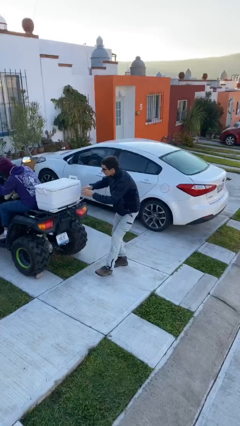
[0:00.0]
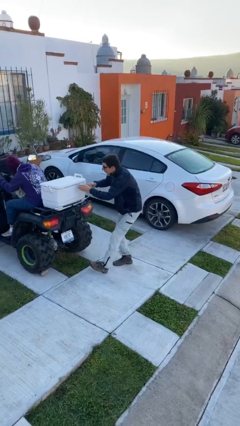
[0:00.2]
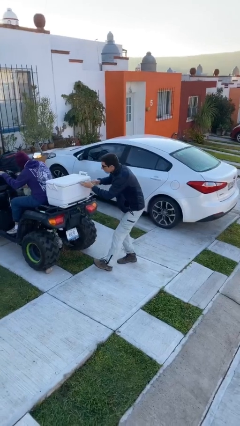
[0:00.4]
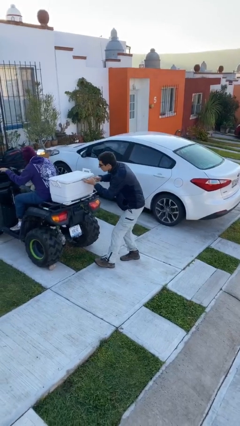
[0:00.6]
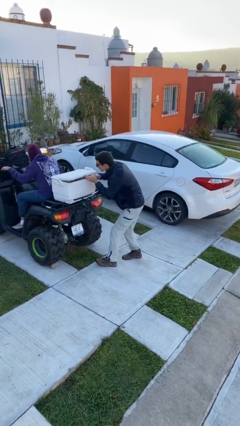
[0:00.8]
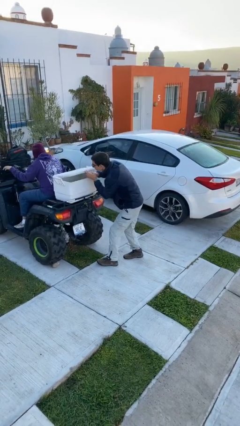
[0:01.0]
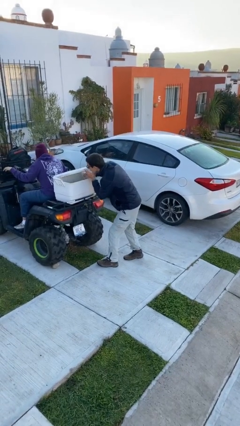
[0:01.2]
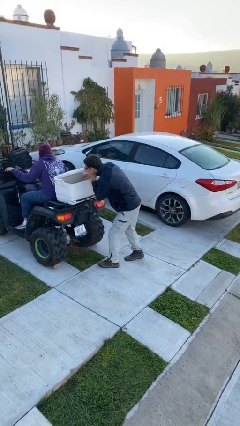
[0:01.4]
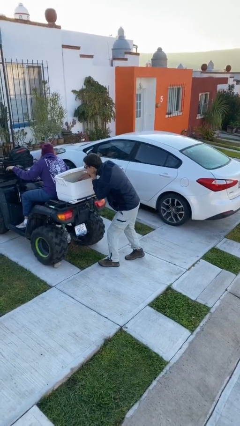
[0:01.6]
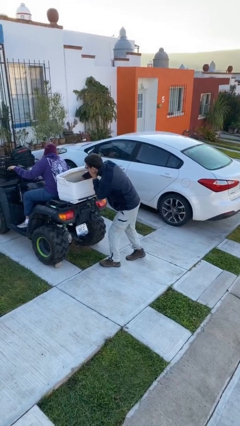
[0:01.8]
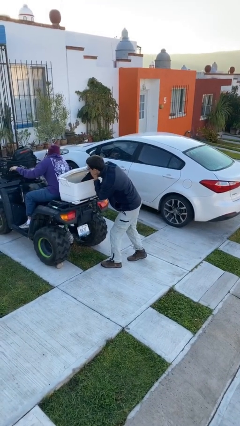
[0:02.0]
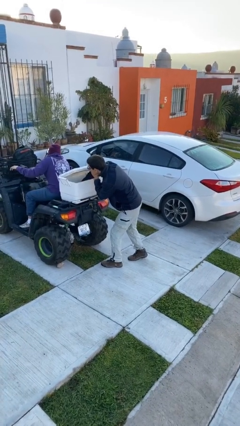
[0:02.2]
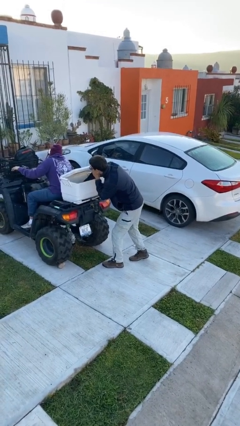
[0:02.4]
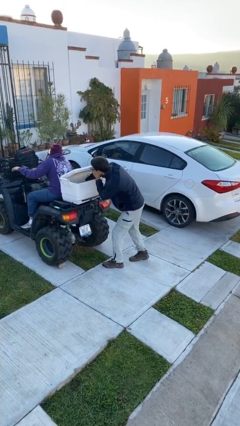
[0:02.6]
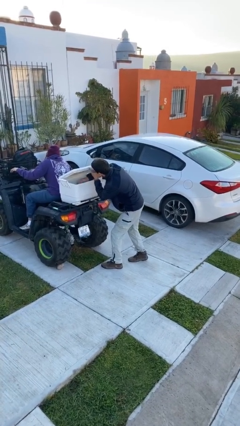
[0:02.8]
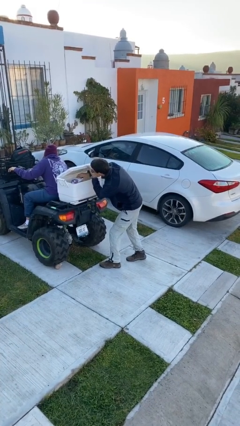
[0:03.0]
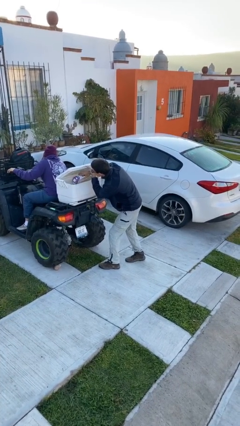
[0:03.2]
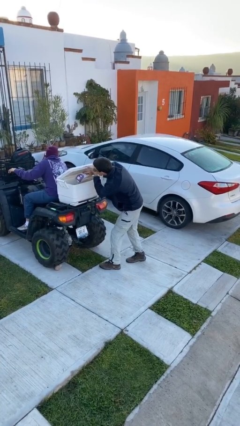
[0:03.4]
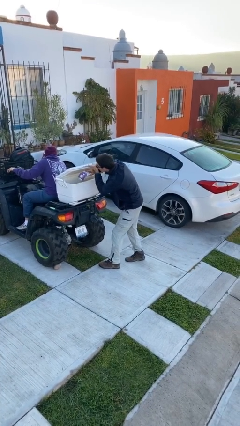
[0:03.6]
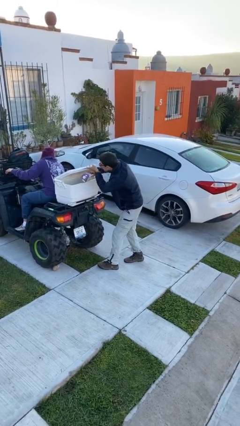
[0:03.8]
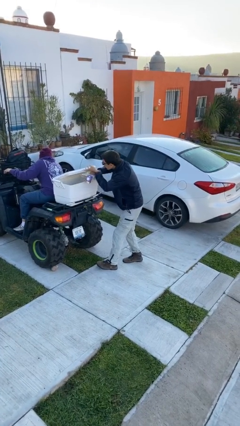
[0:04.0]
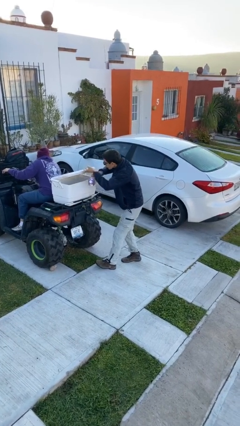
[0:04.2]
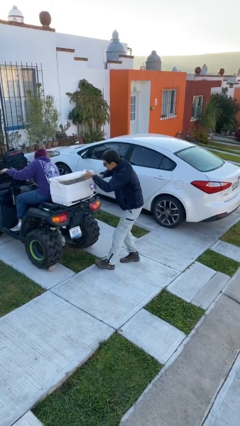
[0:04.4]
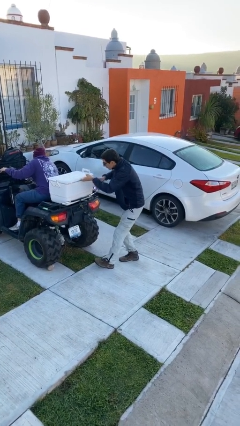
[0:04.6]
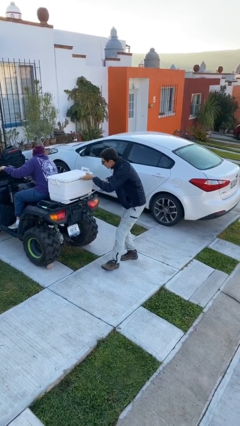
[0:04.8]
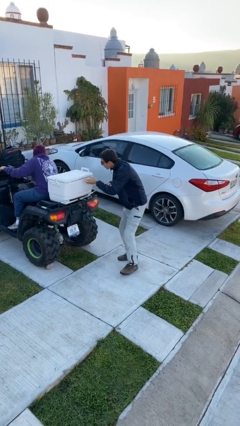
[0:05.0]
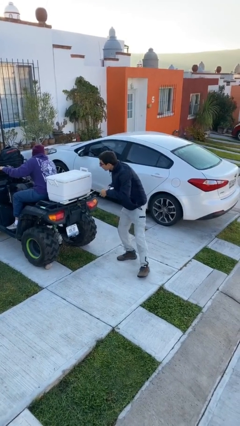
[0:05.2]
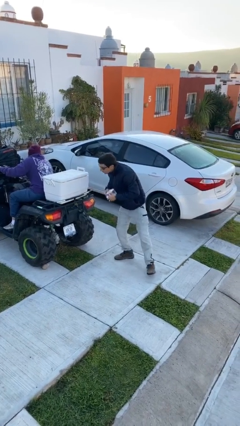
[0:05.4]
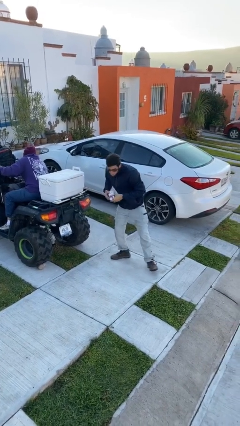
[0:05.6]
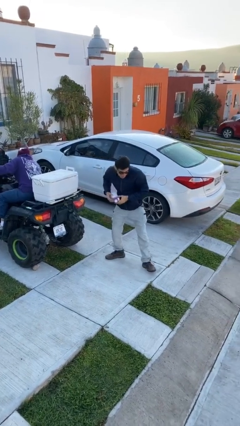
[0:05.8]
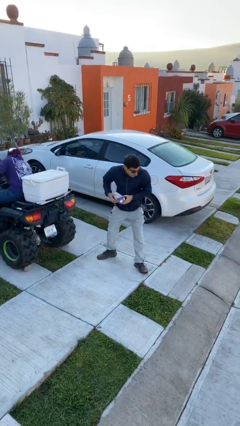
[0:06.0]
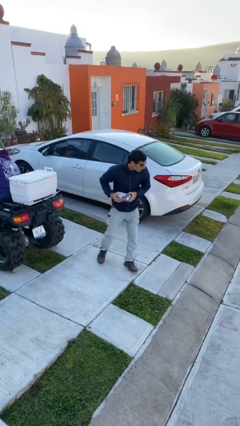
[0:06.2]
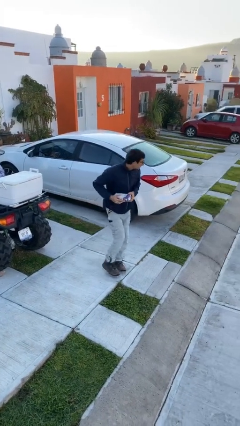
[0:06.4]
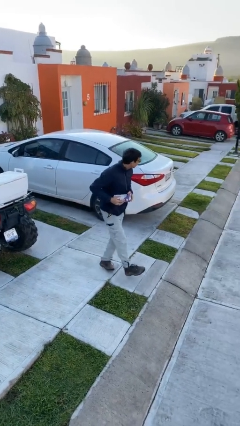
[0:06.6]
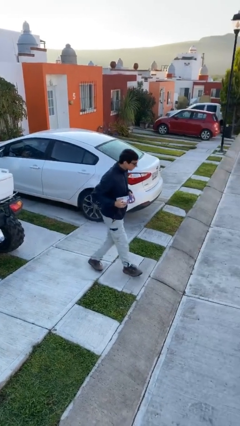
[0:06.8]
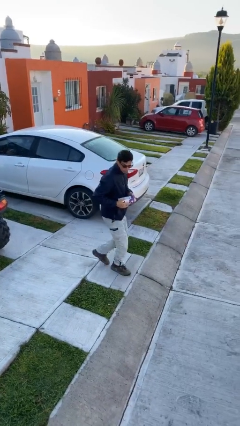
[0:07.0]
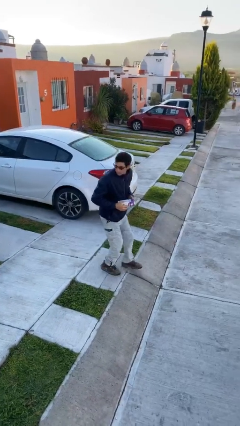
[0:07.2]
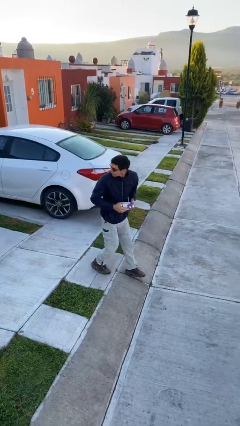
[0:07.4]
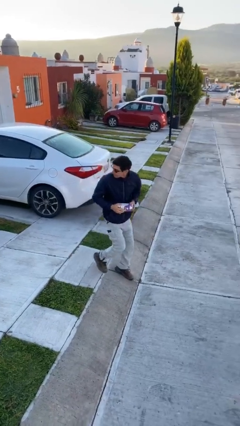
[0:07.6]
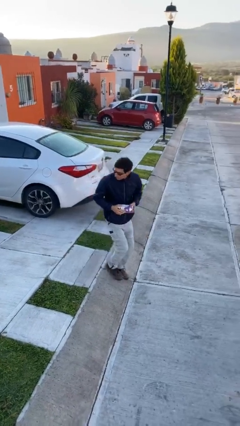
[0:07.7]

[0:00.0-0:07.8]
person steals object from person

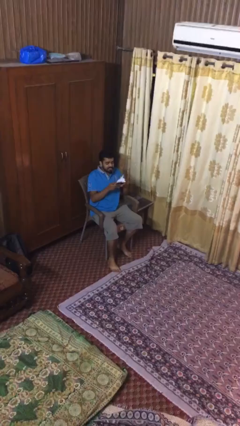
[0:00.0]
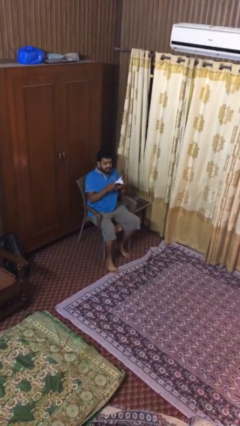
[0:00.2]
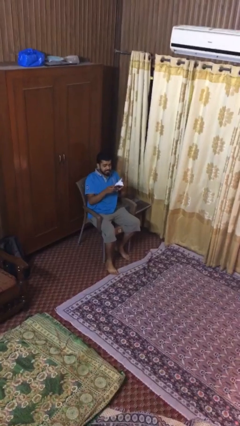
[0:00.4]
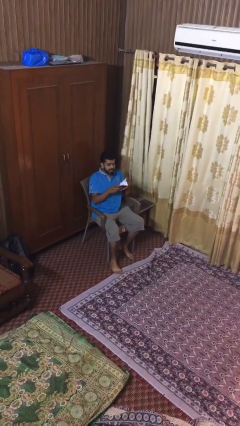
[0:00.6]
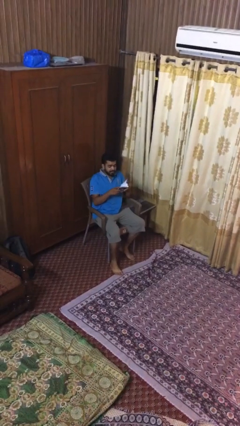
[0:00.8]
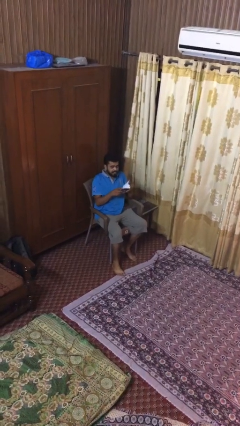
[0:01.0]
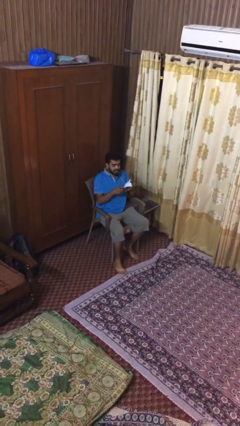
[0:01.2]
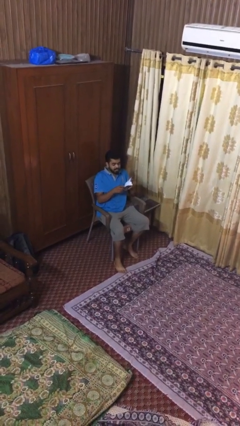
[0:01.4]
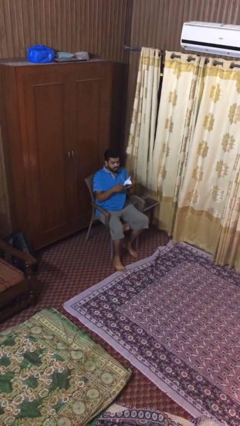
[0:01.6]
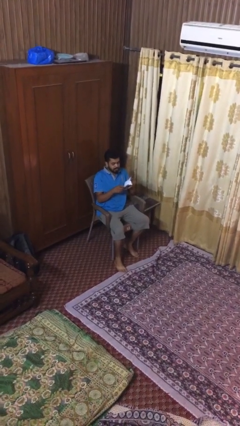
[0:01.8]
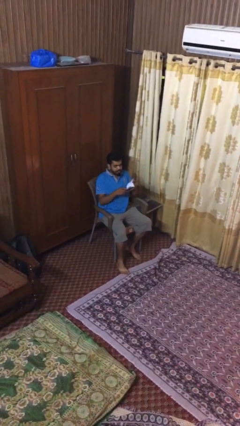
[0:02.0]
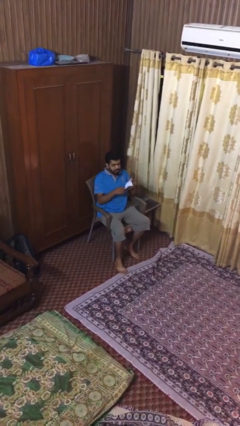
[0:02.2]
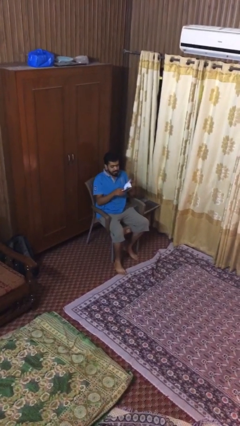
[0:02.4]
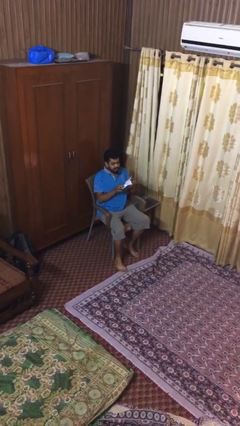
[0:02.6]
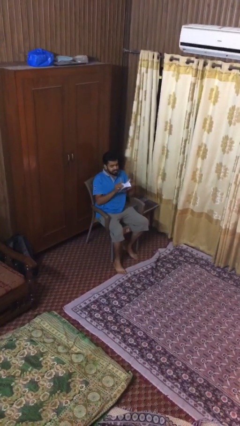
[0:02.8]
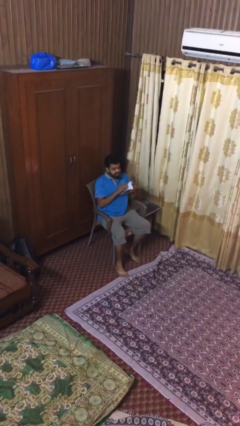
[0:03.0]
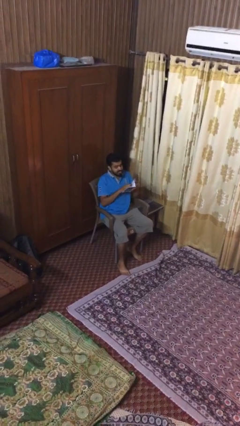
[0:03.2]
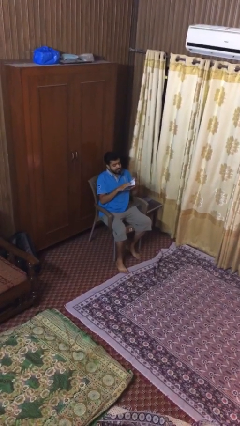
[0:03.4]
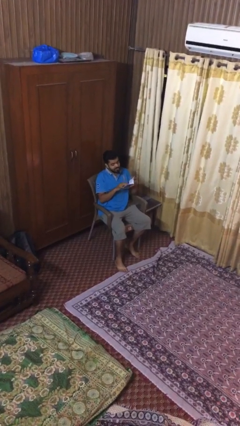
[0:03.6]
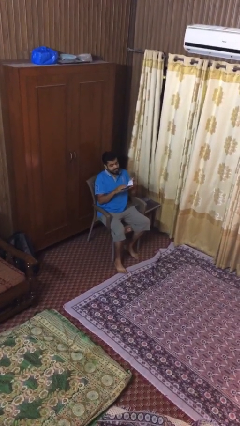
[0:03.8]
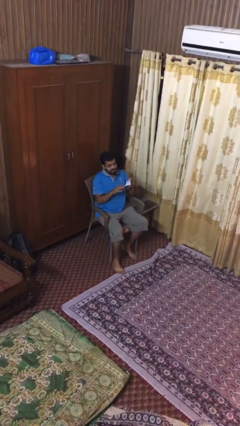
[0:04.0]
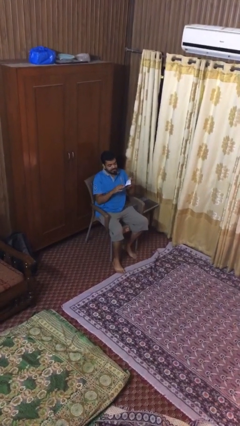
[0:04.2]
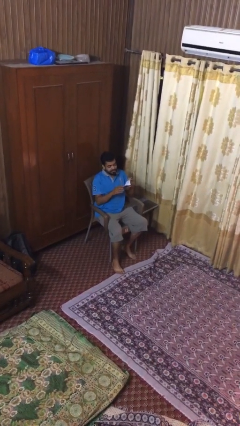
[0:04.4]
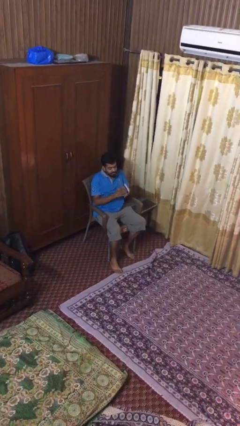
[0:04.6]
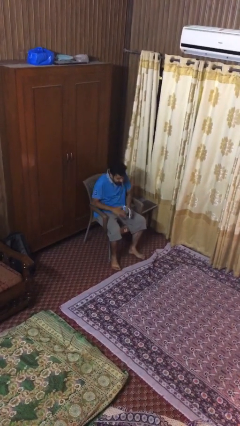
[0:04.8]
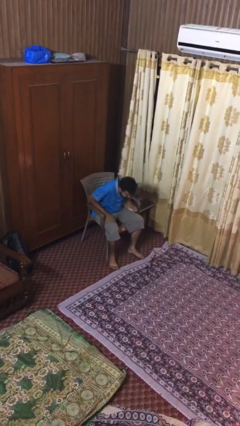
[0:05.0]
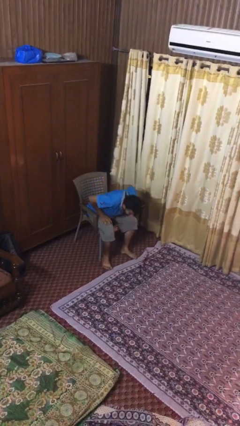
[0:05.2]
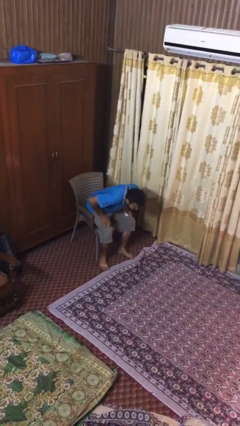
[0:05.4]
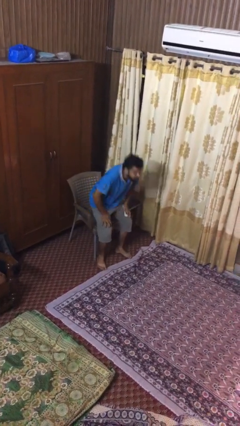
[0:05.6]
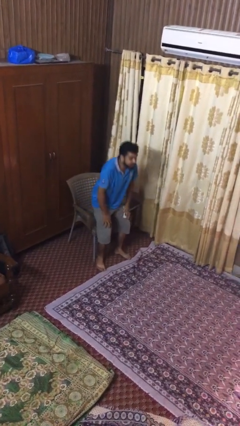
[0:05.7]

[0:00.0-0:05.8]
person reads document

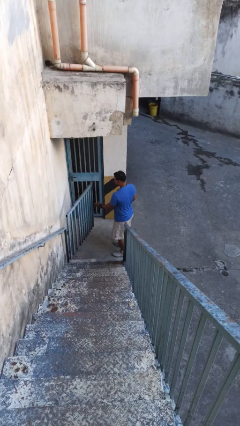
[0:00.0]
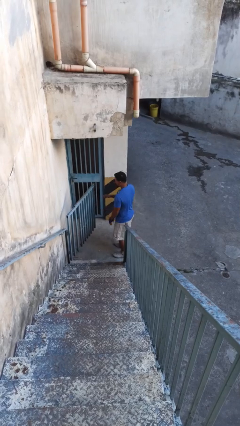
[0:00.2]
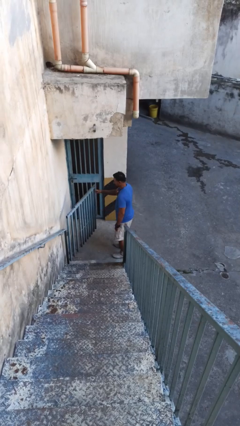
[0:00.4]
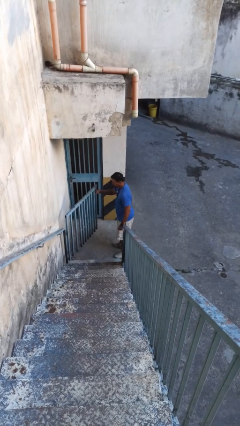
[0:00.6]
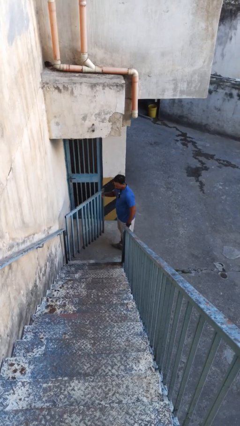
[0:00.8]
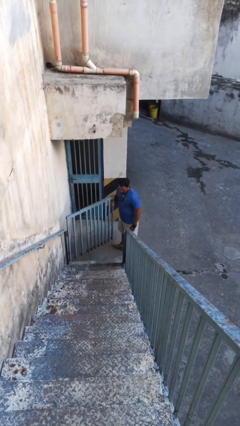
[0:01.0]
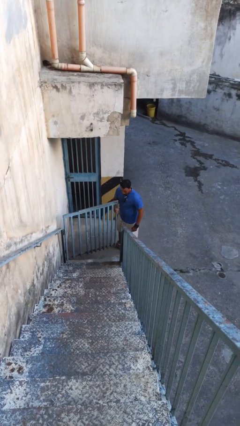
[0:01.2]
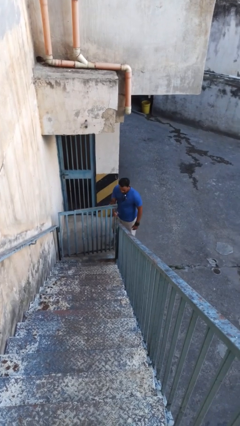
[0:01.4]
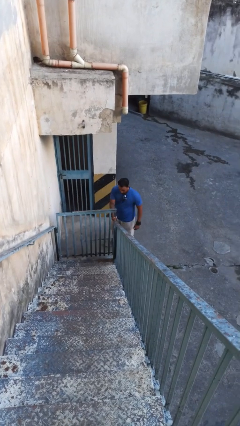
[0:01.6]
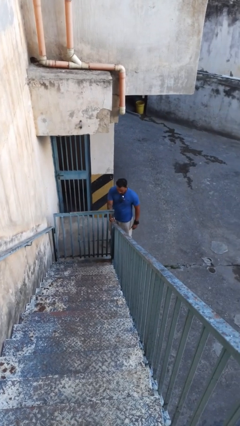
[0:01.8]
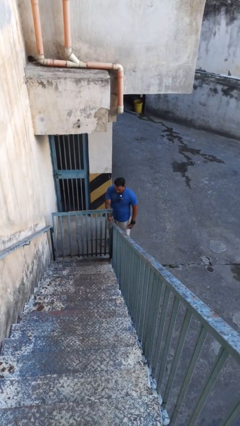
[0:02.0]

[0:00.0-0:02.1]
person closes facility door

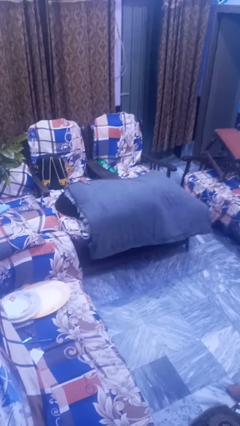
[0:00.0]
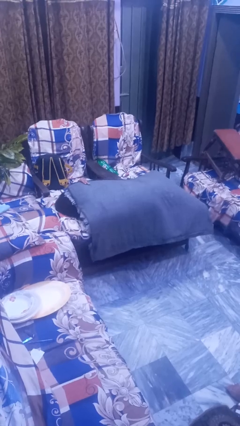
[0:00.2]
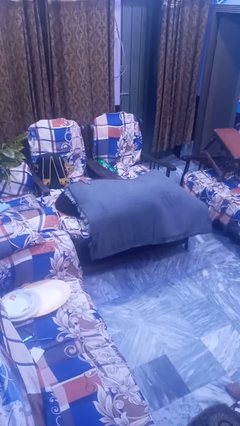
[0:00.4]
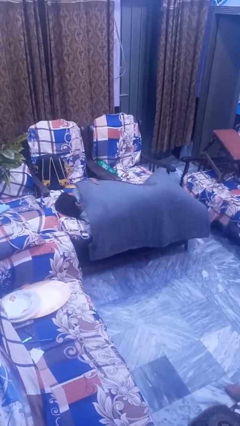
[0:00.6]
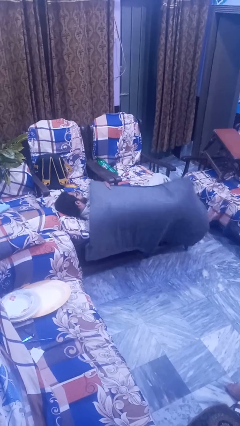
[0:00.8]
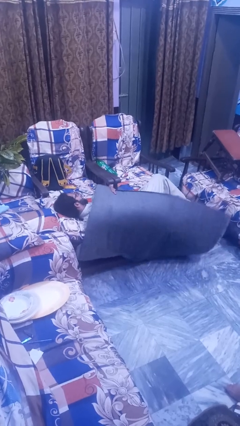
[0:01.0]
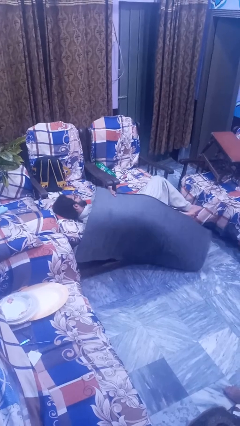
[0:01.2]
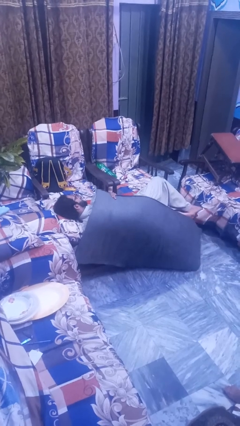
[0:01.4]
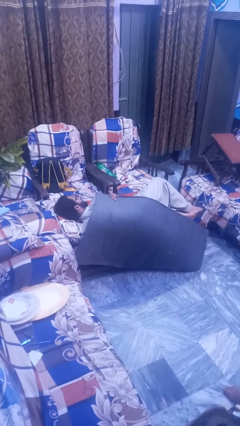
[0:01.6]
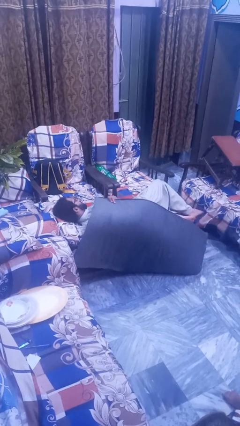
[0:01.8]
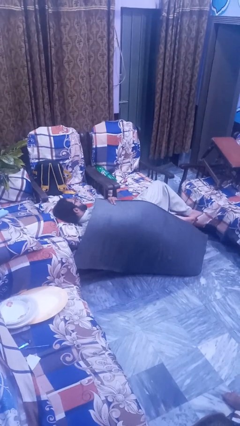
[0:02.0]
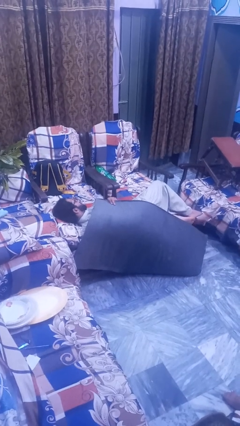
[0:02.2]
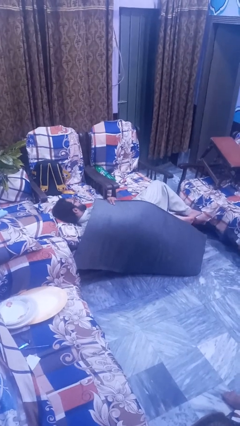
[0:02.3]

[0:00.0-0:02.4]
person uncovers with blanket
